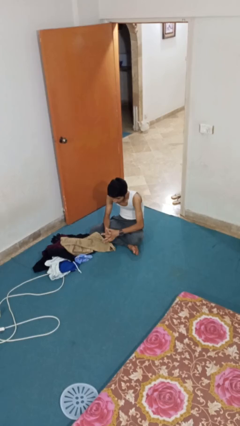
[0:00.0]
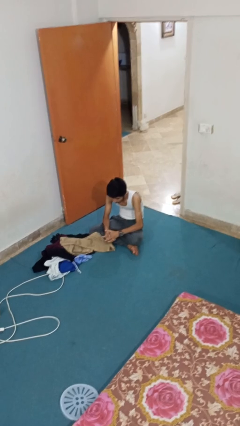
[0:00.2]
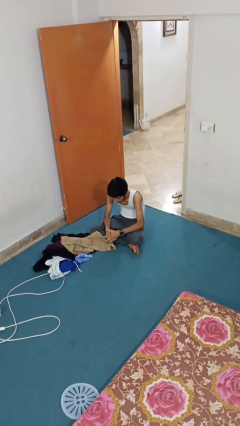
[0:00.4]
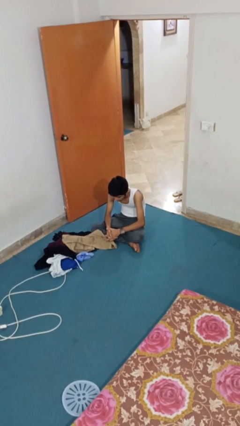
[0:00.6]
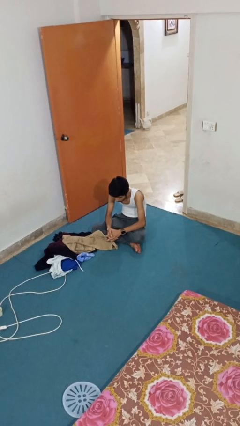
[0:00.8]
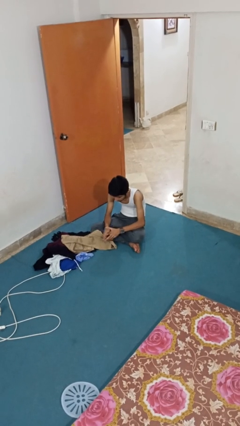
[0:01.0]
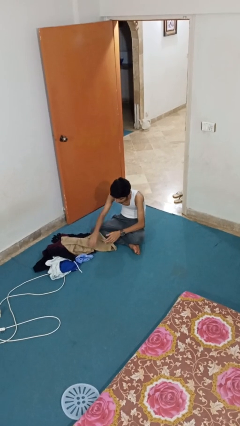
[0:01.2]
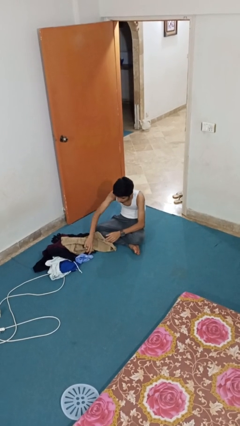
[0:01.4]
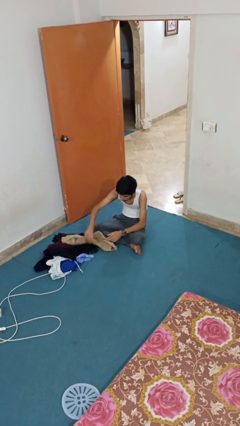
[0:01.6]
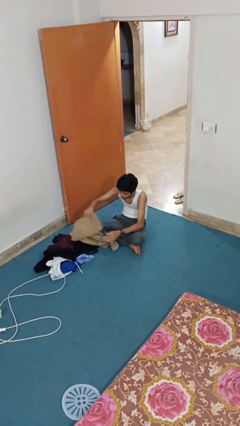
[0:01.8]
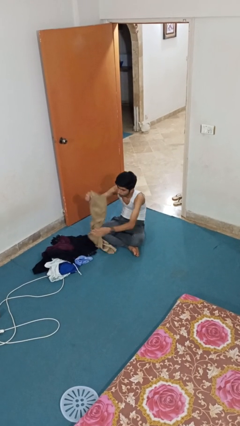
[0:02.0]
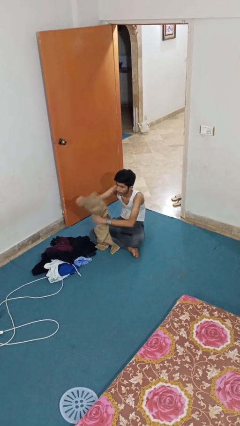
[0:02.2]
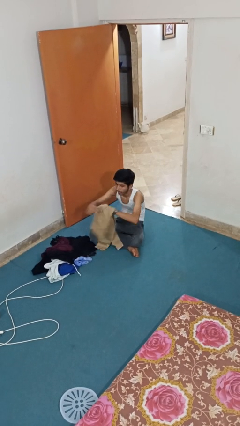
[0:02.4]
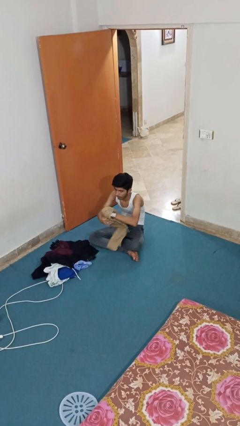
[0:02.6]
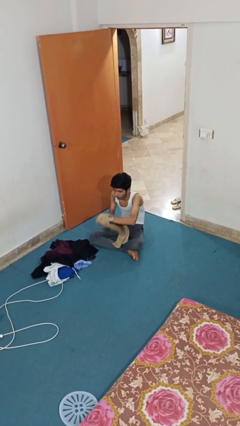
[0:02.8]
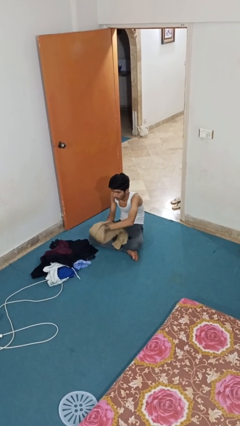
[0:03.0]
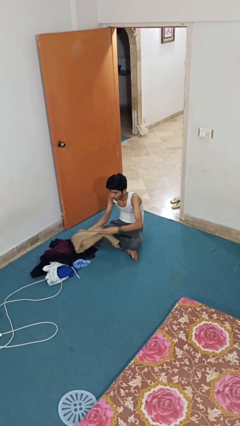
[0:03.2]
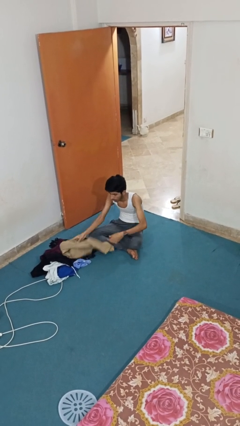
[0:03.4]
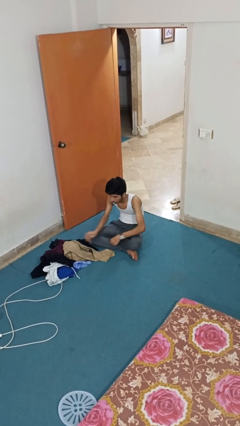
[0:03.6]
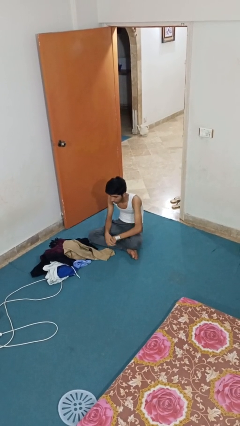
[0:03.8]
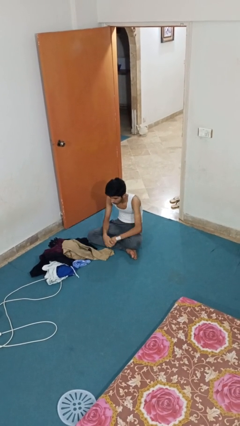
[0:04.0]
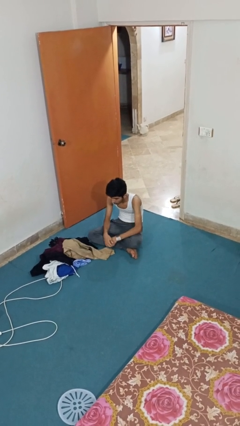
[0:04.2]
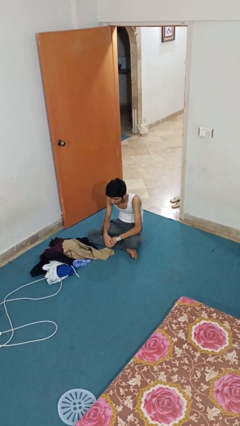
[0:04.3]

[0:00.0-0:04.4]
person folds pants

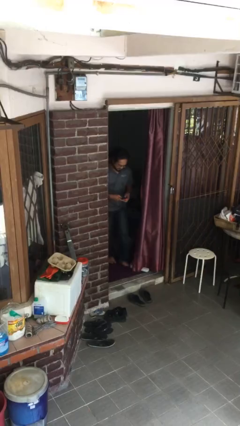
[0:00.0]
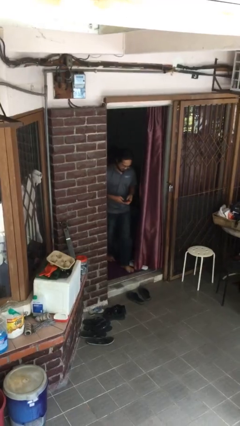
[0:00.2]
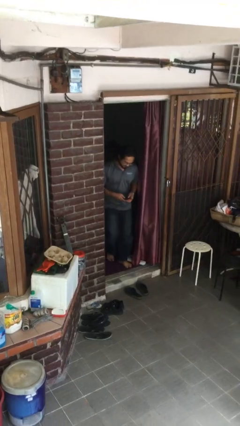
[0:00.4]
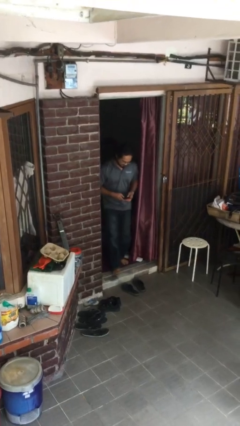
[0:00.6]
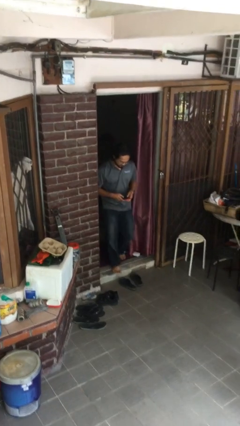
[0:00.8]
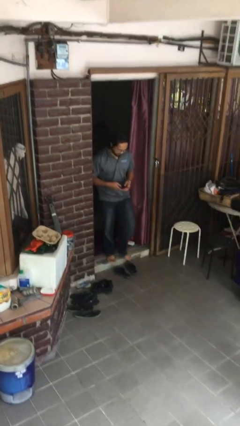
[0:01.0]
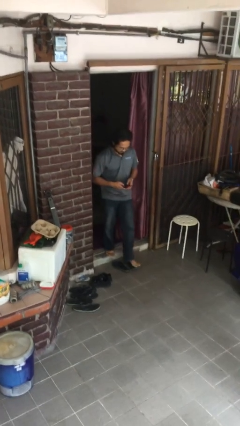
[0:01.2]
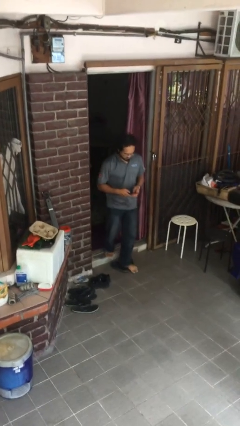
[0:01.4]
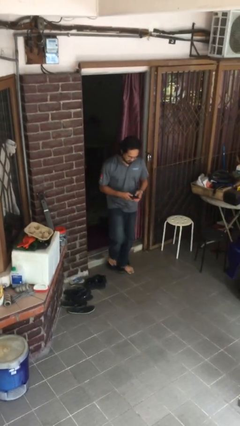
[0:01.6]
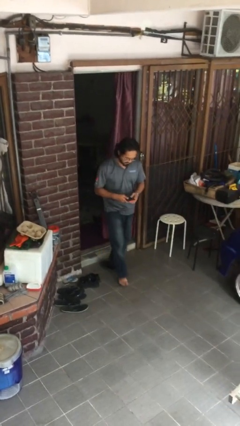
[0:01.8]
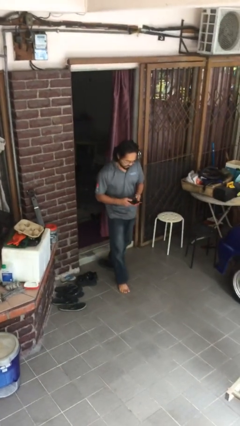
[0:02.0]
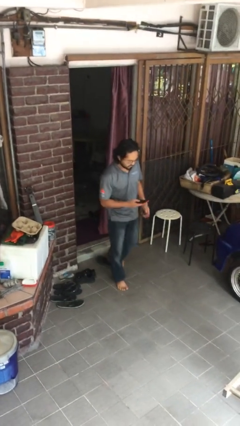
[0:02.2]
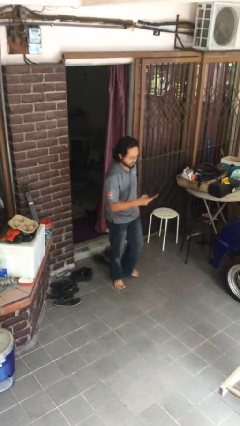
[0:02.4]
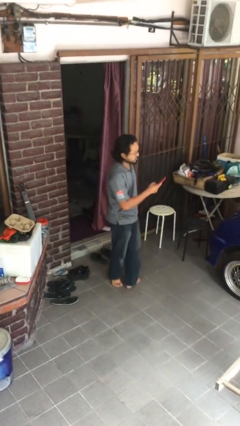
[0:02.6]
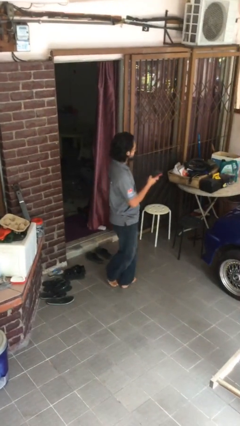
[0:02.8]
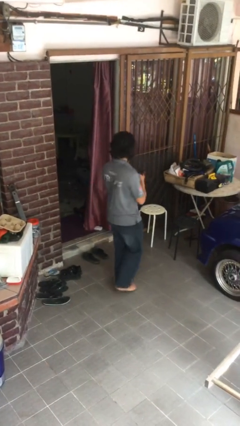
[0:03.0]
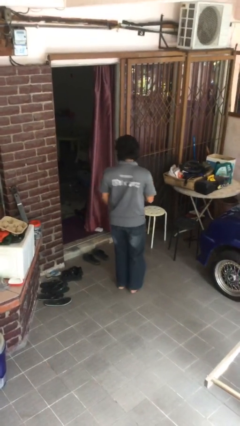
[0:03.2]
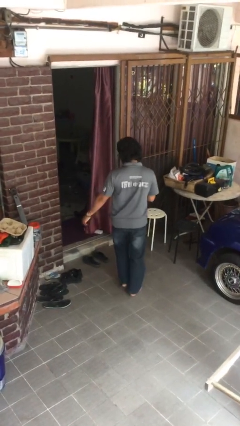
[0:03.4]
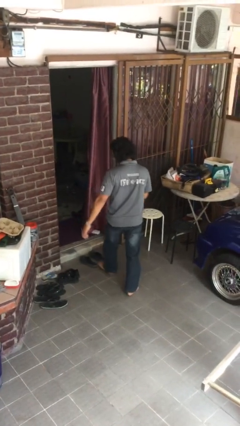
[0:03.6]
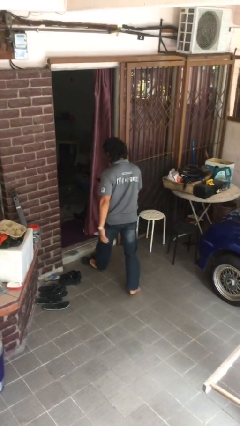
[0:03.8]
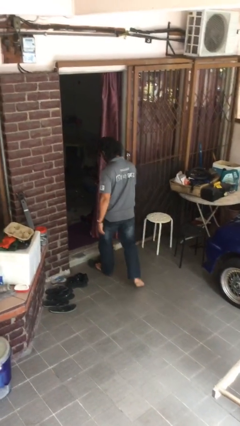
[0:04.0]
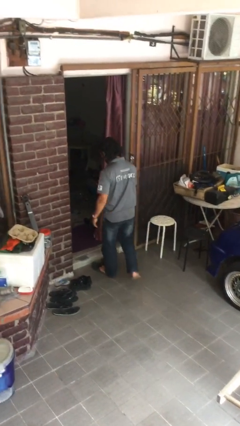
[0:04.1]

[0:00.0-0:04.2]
person enters scene through structure

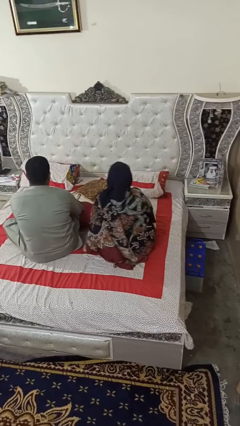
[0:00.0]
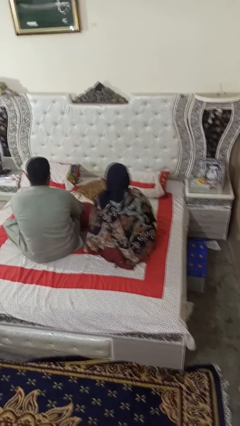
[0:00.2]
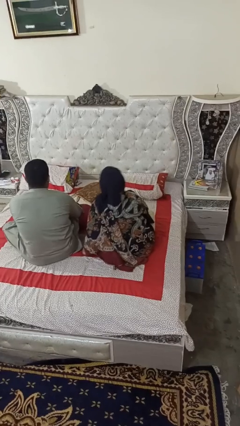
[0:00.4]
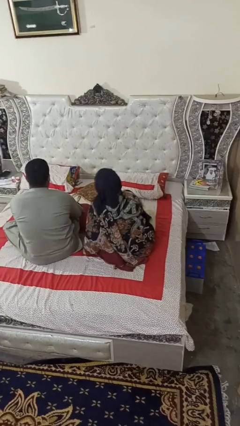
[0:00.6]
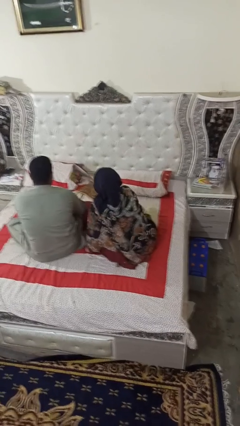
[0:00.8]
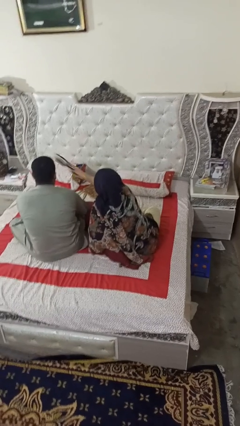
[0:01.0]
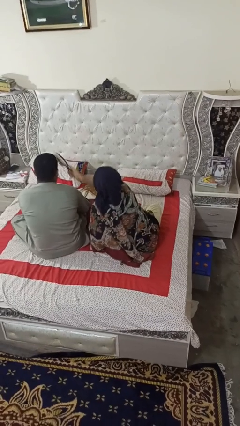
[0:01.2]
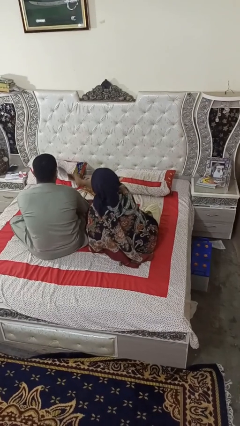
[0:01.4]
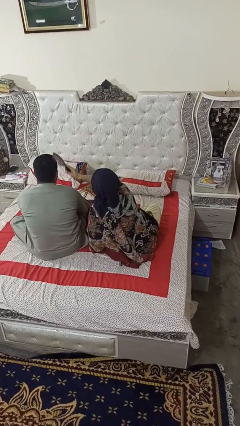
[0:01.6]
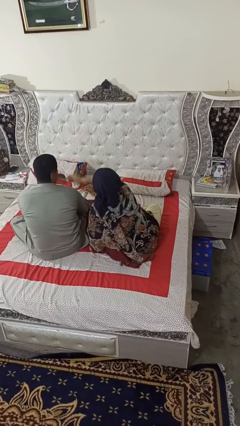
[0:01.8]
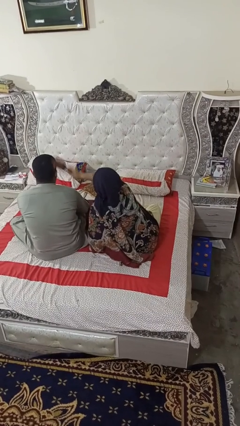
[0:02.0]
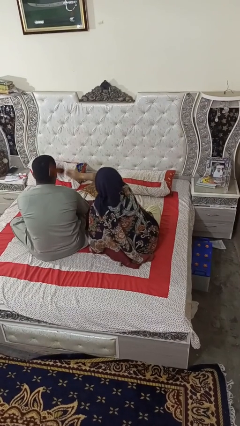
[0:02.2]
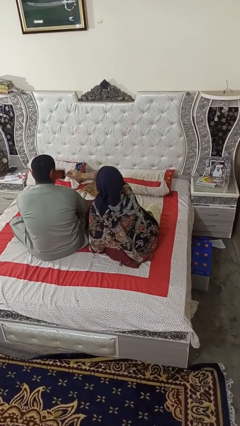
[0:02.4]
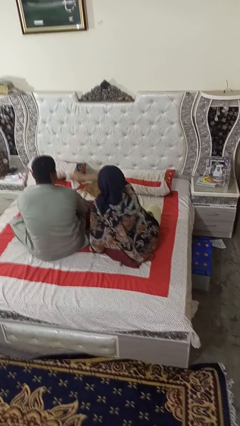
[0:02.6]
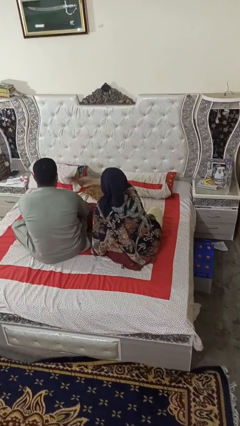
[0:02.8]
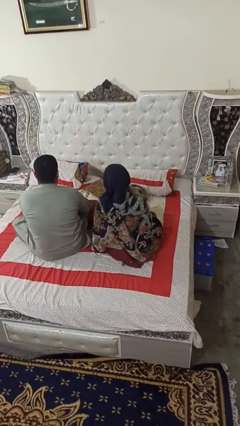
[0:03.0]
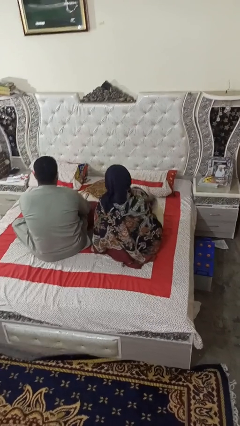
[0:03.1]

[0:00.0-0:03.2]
person brushes hair of person

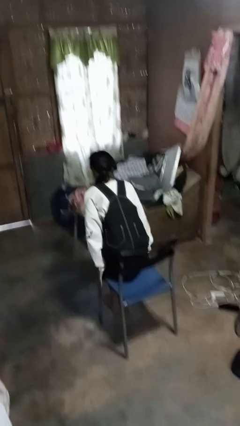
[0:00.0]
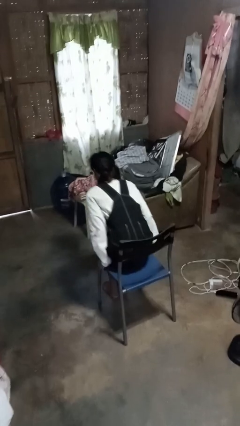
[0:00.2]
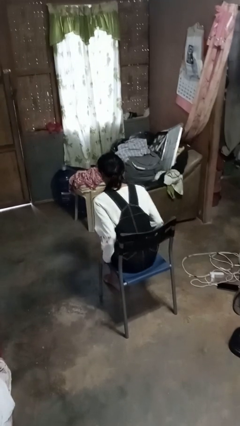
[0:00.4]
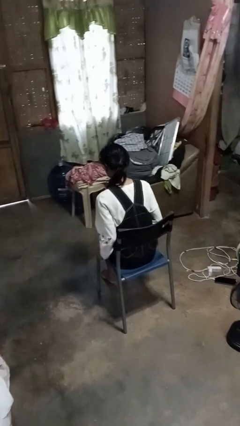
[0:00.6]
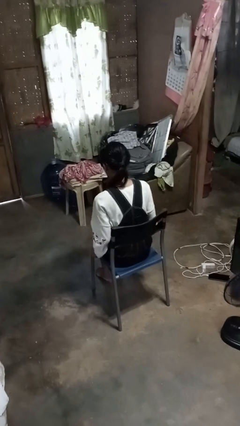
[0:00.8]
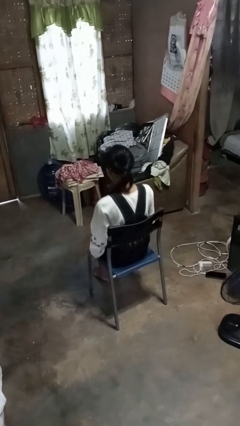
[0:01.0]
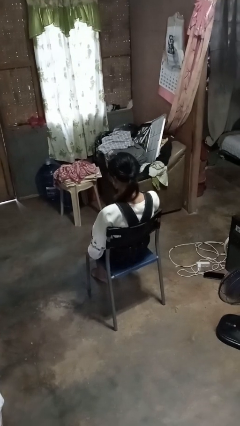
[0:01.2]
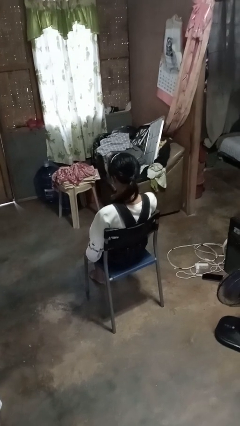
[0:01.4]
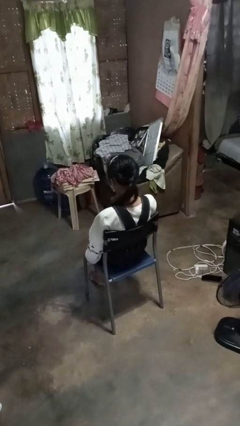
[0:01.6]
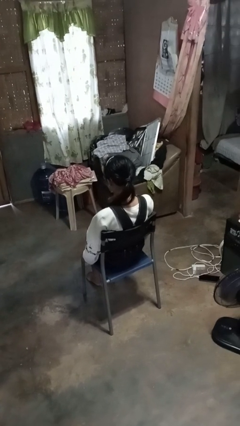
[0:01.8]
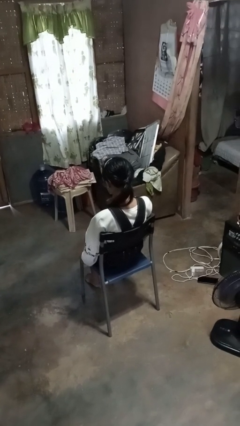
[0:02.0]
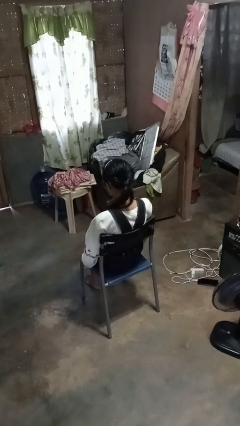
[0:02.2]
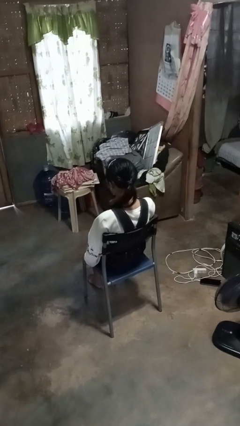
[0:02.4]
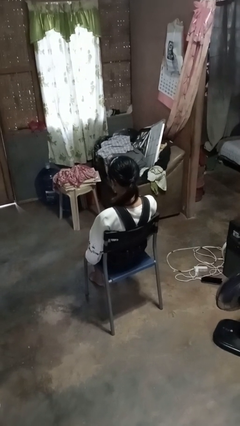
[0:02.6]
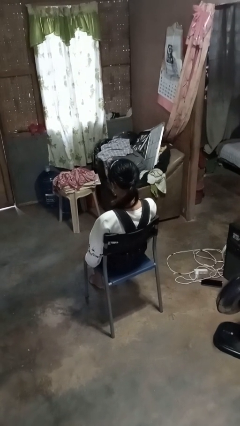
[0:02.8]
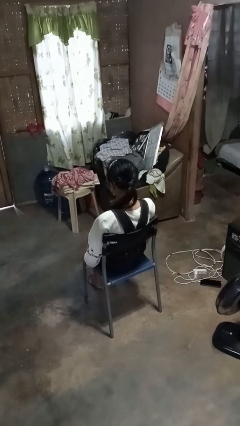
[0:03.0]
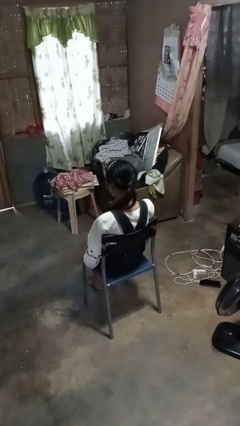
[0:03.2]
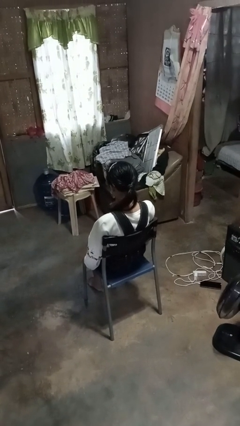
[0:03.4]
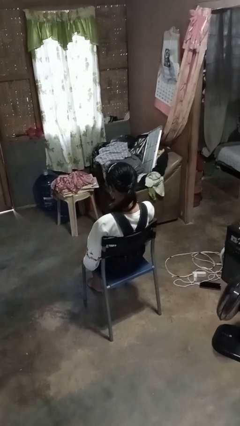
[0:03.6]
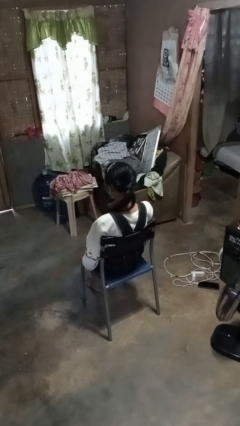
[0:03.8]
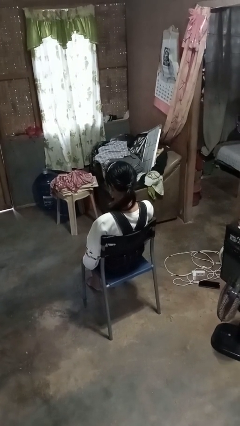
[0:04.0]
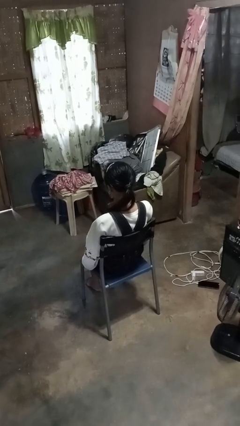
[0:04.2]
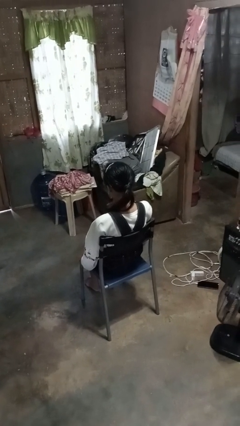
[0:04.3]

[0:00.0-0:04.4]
person sits down

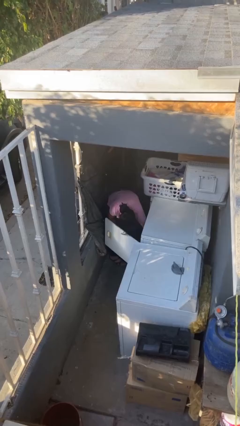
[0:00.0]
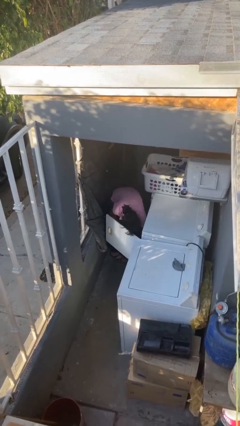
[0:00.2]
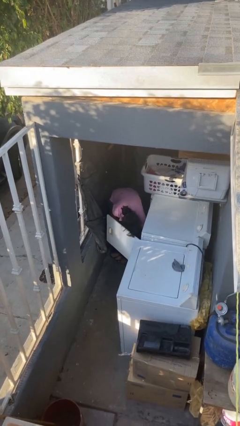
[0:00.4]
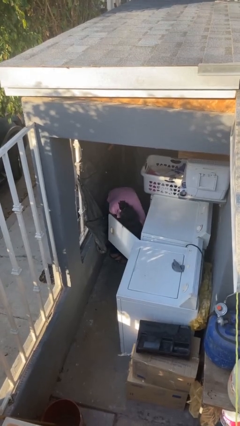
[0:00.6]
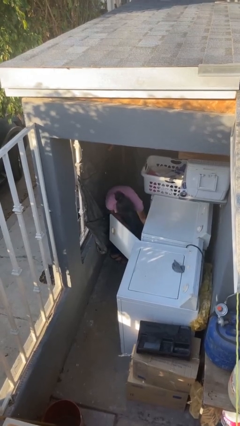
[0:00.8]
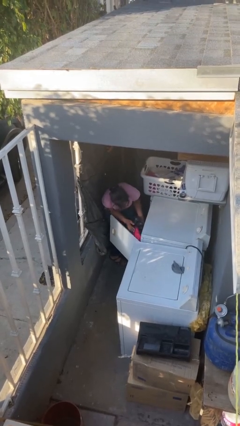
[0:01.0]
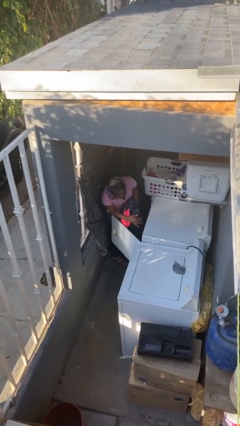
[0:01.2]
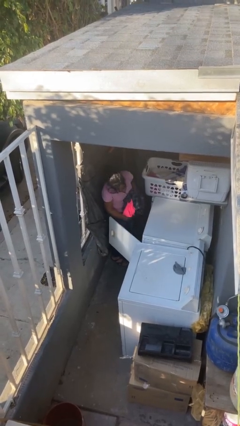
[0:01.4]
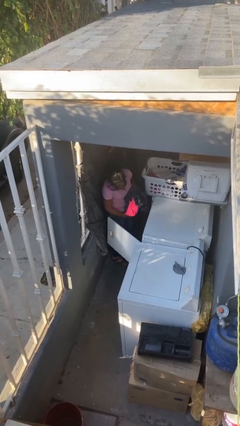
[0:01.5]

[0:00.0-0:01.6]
person unloads dryer
